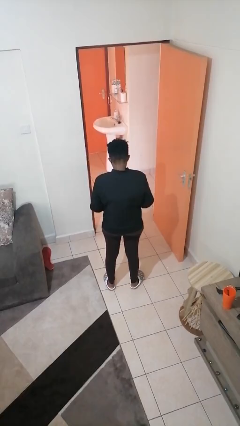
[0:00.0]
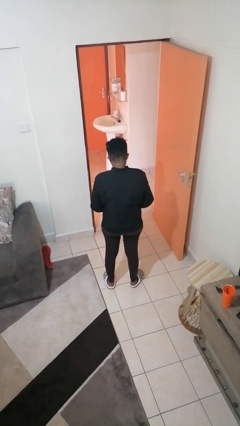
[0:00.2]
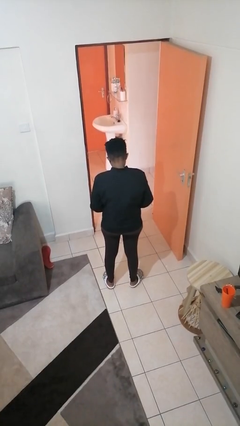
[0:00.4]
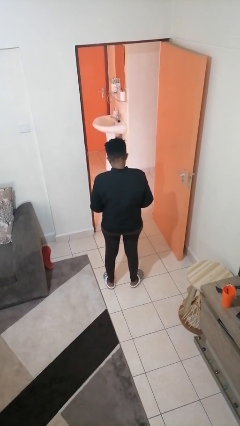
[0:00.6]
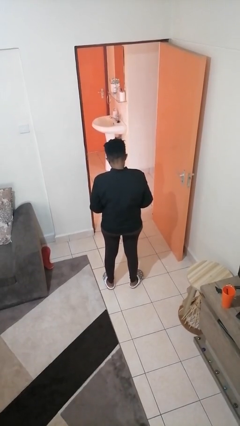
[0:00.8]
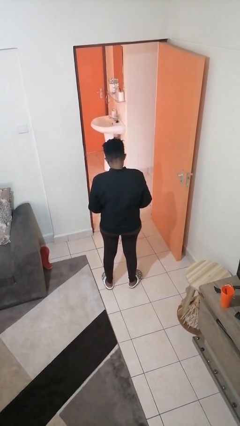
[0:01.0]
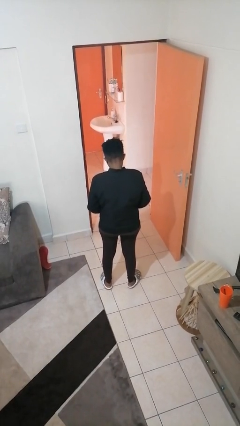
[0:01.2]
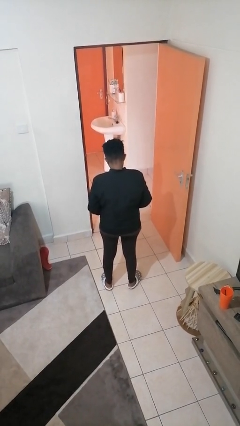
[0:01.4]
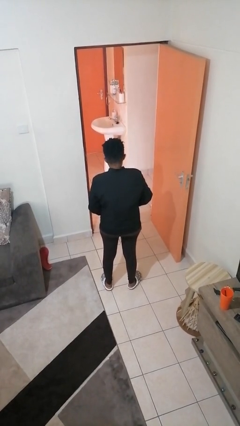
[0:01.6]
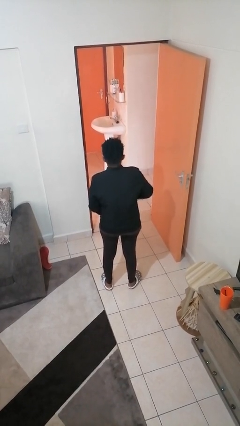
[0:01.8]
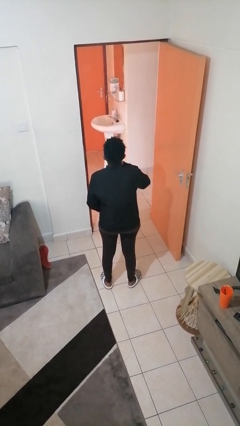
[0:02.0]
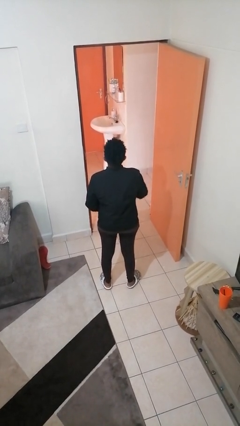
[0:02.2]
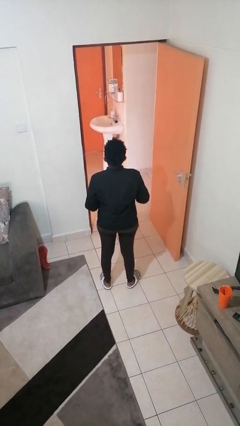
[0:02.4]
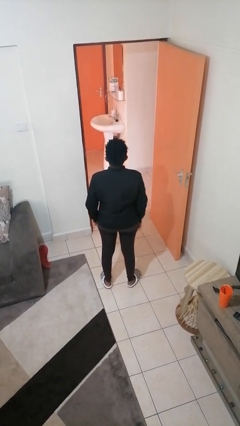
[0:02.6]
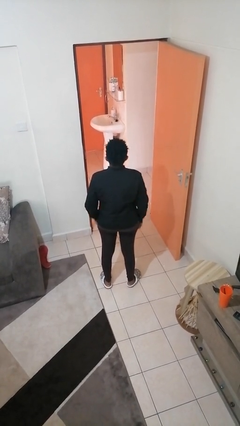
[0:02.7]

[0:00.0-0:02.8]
person zips up jacket

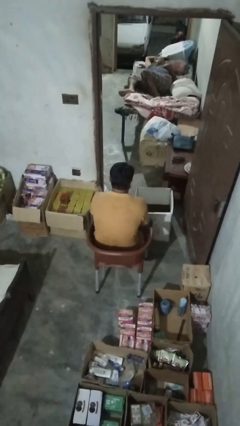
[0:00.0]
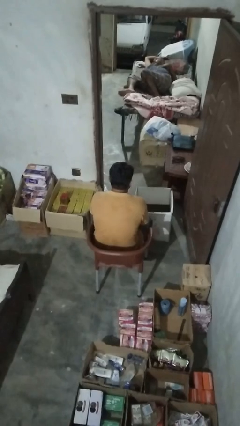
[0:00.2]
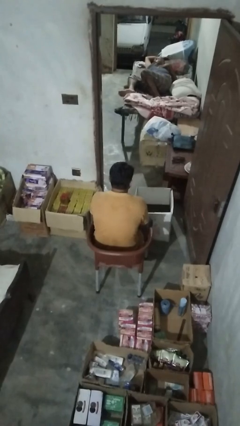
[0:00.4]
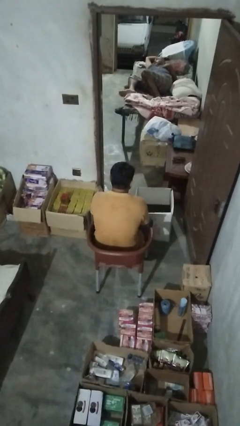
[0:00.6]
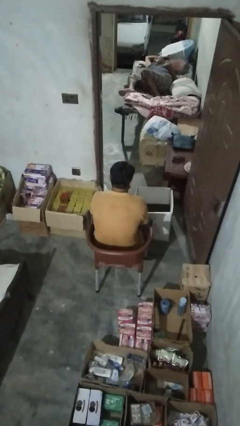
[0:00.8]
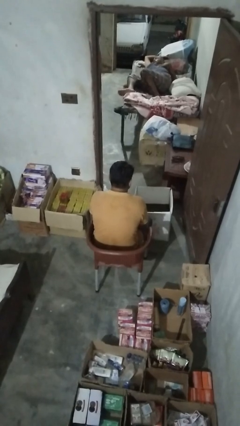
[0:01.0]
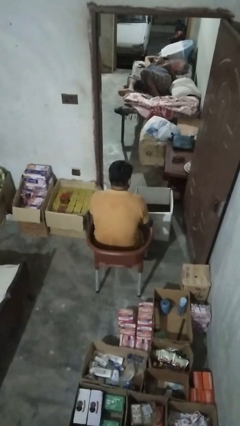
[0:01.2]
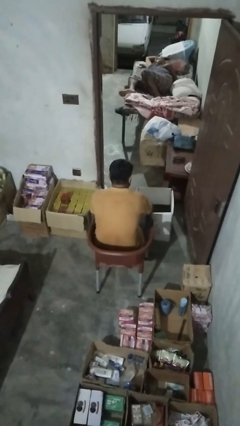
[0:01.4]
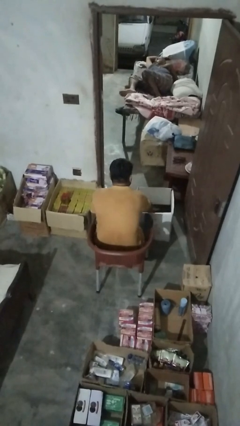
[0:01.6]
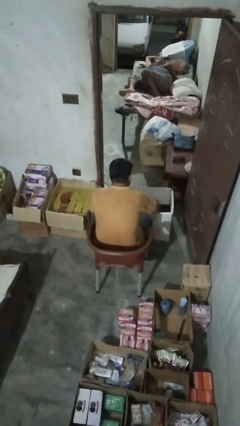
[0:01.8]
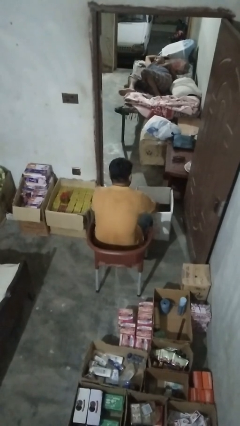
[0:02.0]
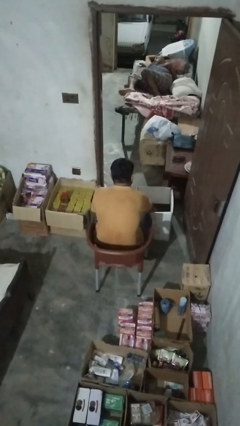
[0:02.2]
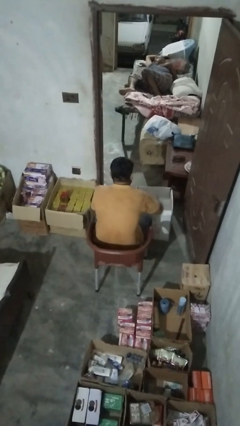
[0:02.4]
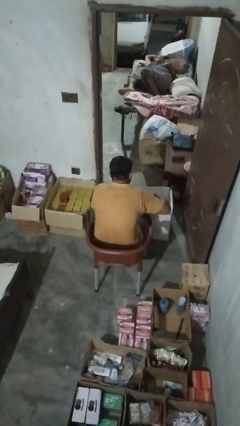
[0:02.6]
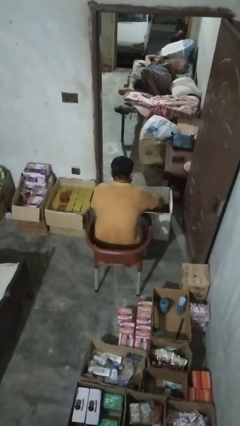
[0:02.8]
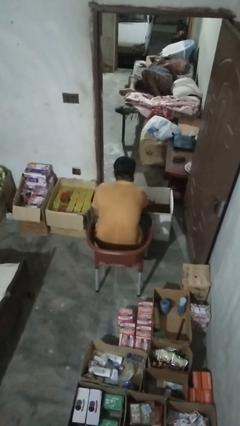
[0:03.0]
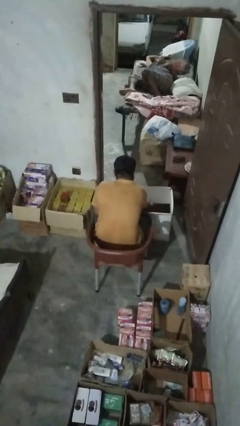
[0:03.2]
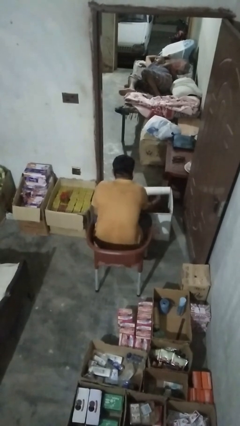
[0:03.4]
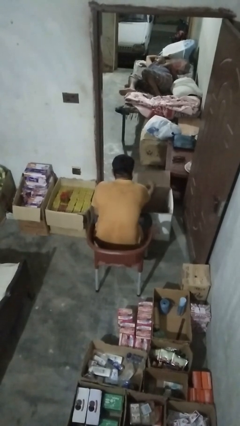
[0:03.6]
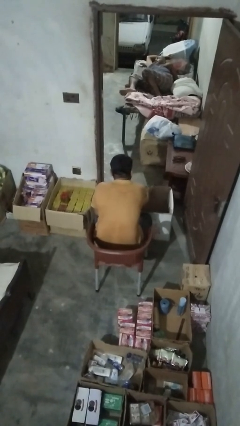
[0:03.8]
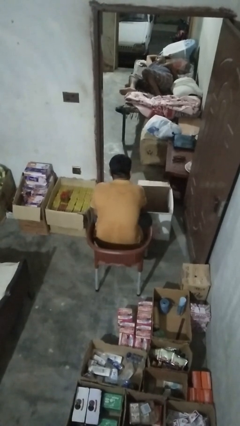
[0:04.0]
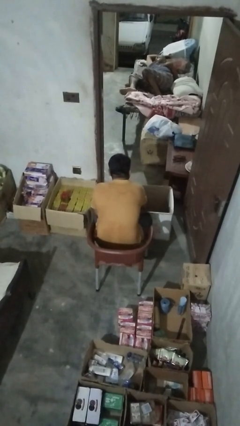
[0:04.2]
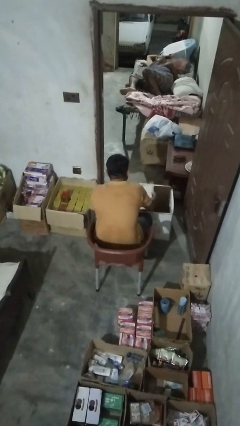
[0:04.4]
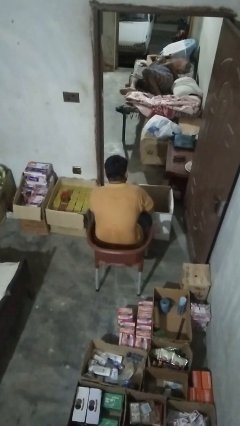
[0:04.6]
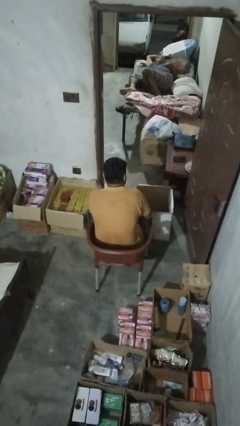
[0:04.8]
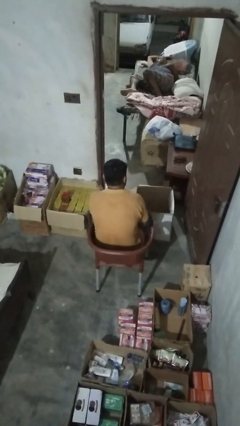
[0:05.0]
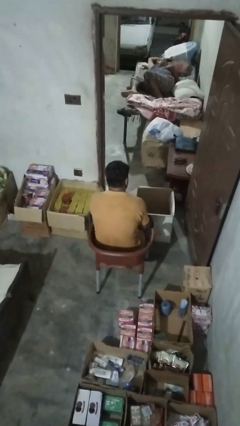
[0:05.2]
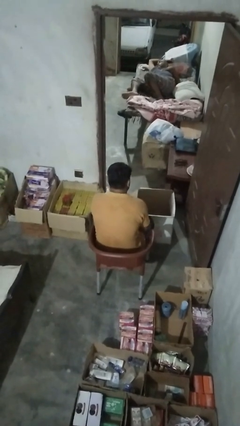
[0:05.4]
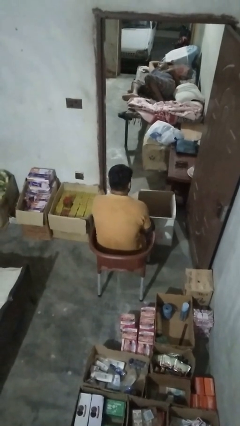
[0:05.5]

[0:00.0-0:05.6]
person closes box

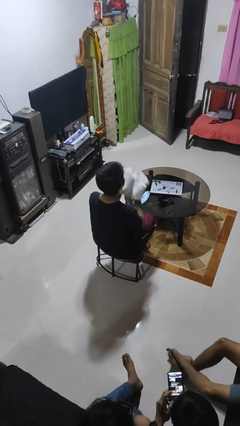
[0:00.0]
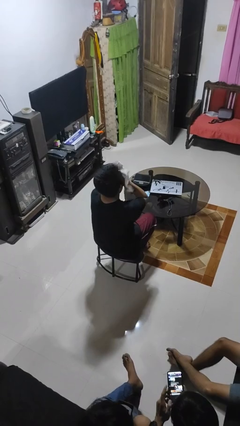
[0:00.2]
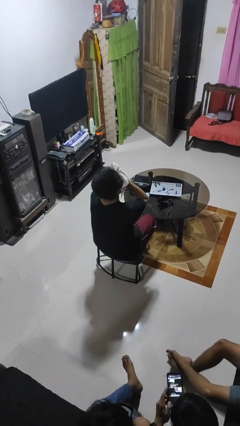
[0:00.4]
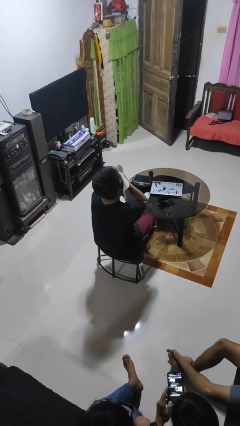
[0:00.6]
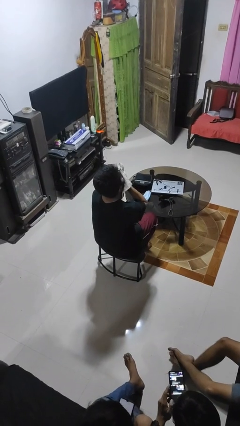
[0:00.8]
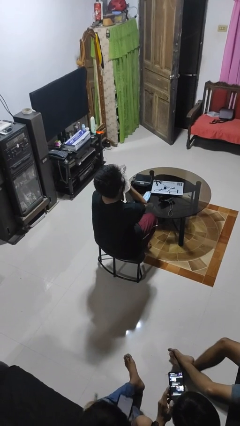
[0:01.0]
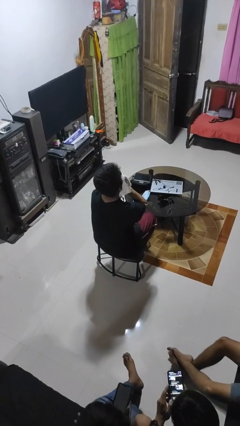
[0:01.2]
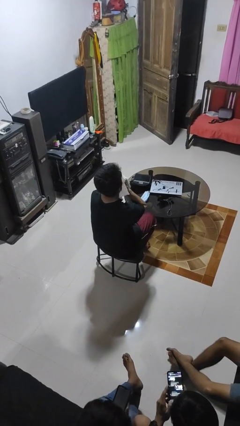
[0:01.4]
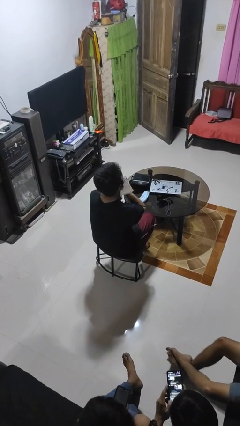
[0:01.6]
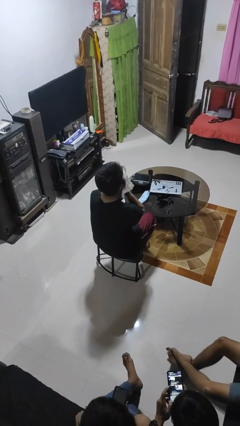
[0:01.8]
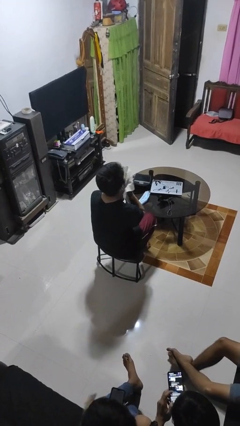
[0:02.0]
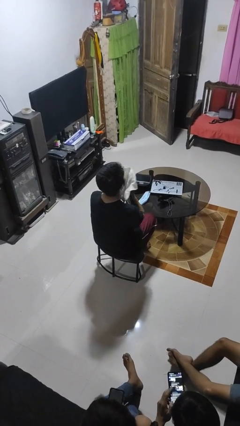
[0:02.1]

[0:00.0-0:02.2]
person wipes mouth with napkin

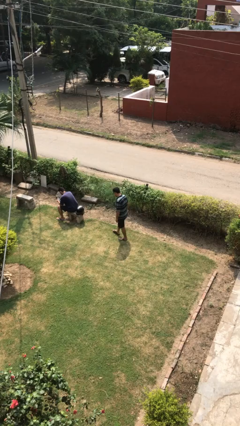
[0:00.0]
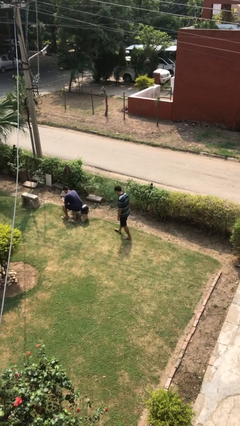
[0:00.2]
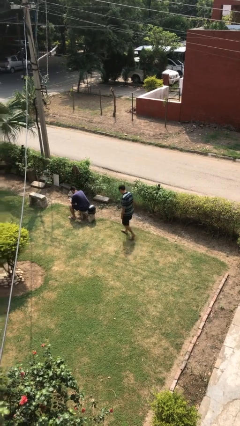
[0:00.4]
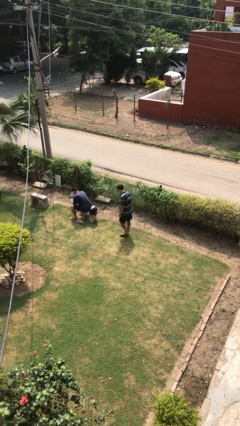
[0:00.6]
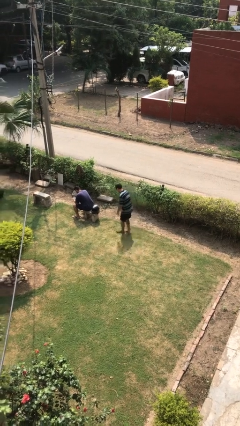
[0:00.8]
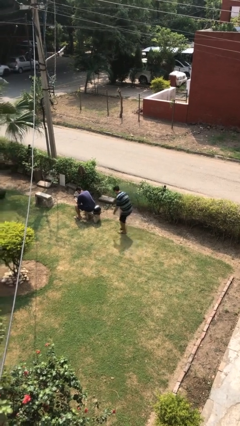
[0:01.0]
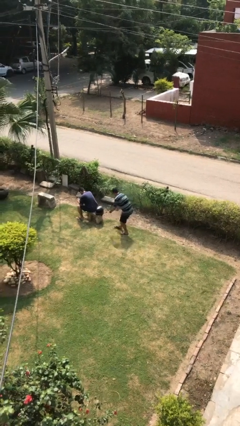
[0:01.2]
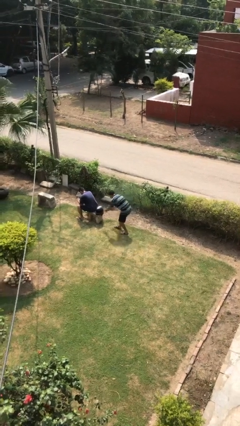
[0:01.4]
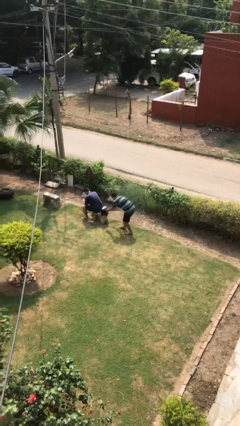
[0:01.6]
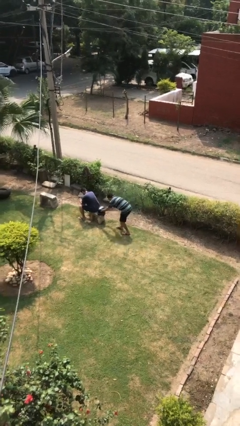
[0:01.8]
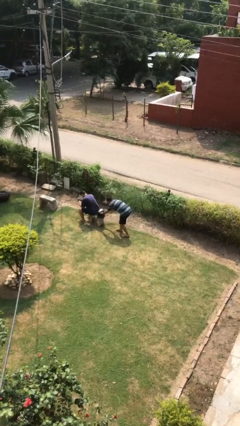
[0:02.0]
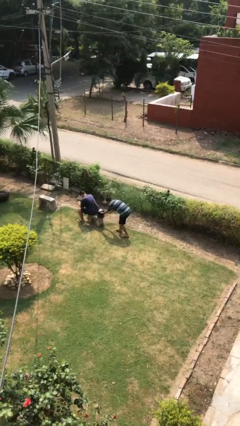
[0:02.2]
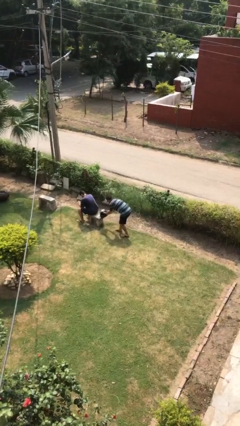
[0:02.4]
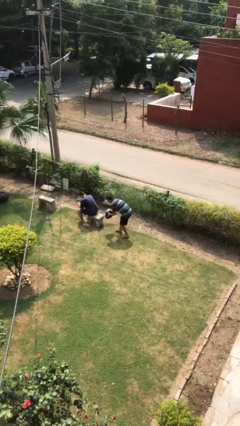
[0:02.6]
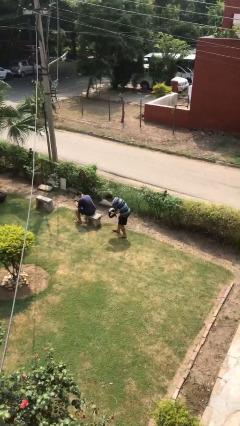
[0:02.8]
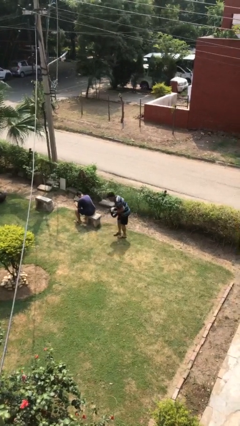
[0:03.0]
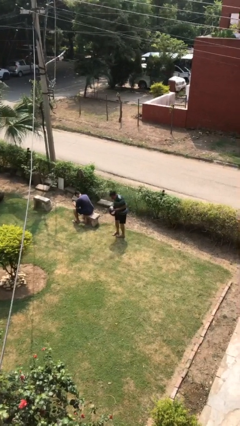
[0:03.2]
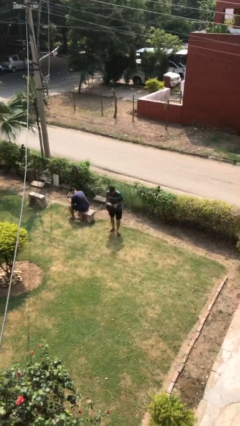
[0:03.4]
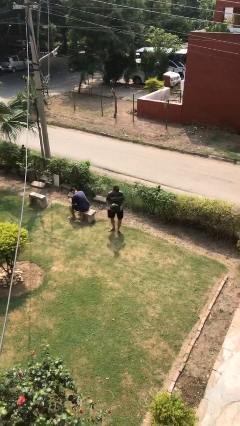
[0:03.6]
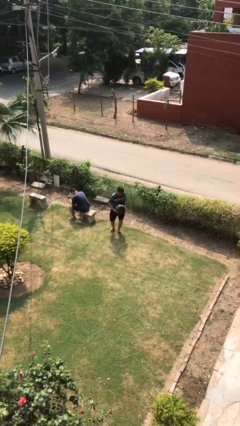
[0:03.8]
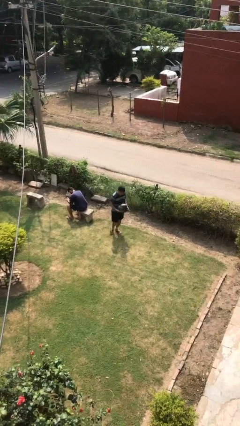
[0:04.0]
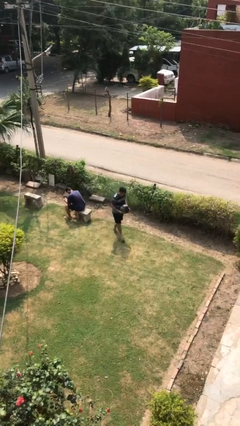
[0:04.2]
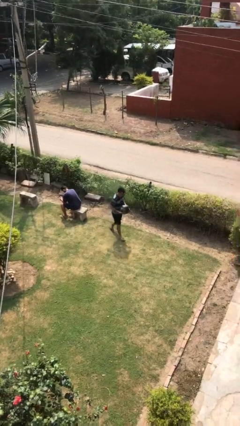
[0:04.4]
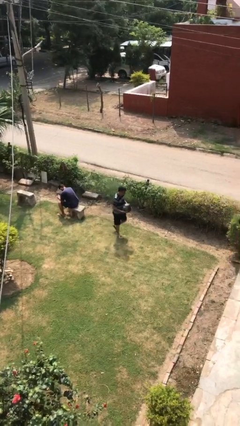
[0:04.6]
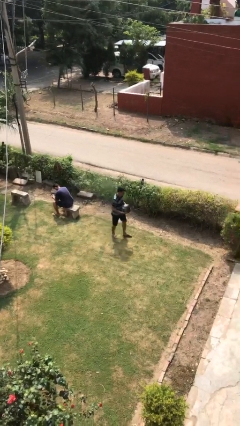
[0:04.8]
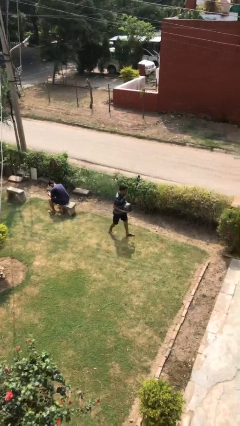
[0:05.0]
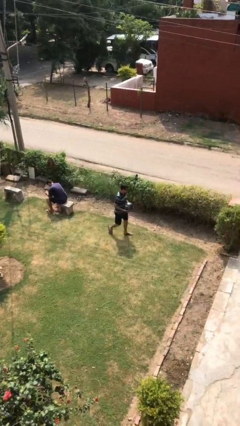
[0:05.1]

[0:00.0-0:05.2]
person steals object from person

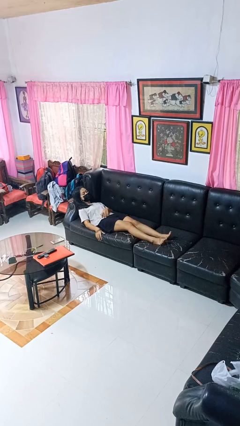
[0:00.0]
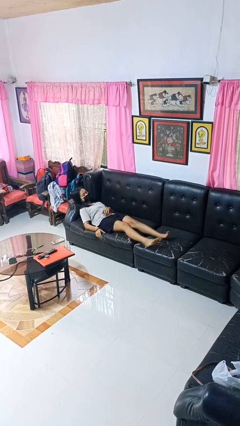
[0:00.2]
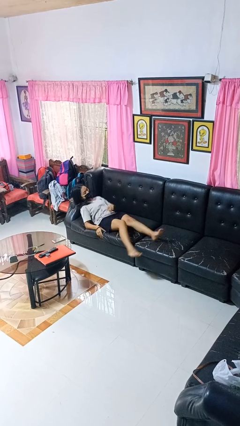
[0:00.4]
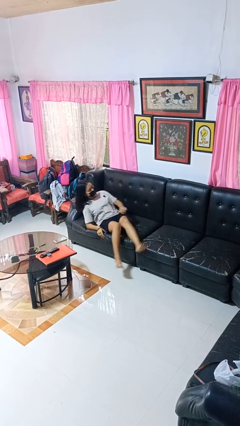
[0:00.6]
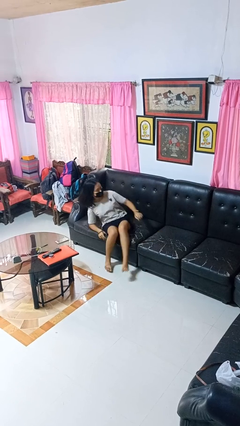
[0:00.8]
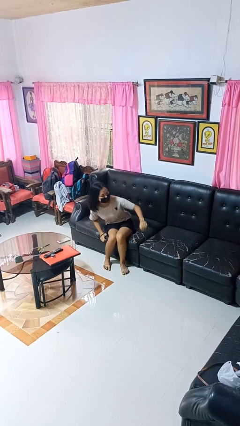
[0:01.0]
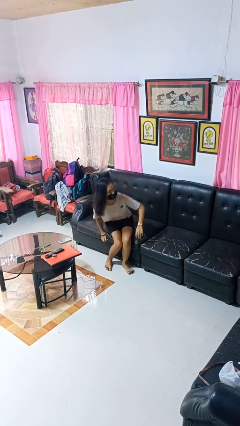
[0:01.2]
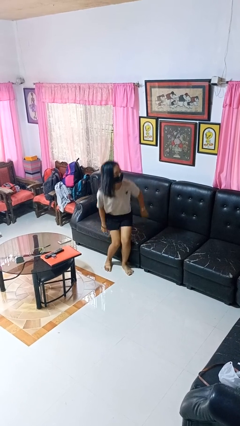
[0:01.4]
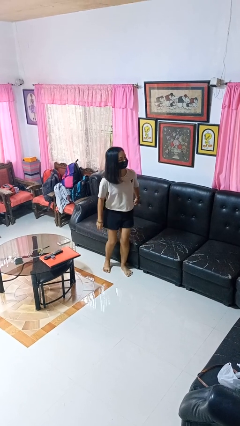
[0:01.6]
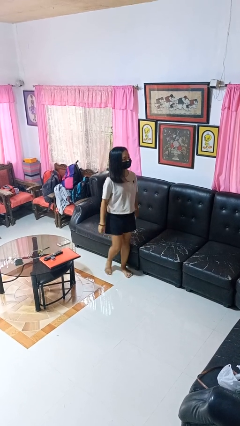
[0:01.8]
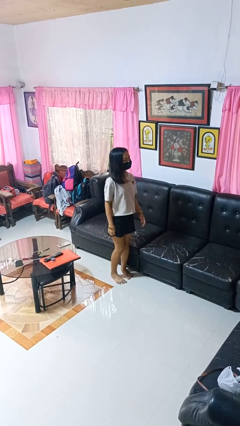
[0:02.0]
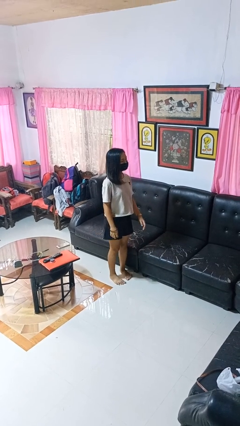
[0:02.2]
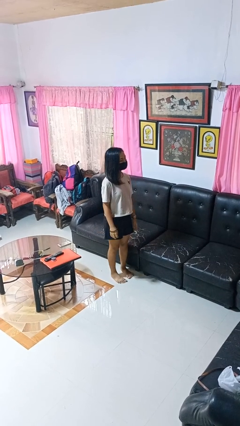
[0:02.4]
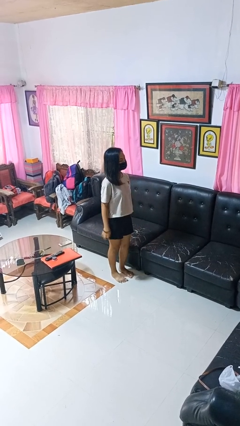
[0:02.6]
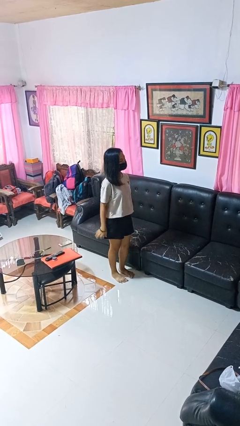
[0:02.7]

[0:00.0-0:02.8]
person stands up
